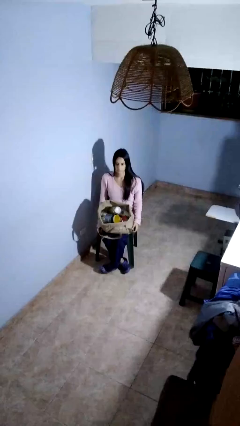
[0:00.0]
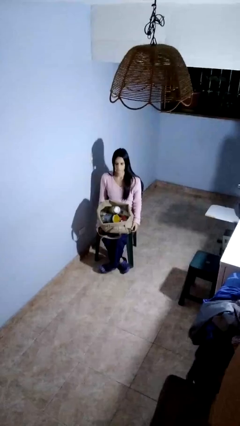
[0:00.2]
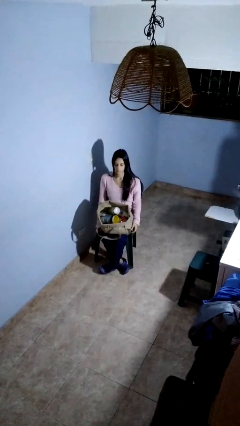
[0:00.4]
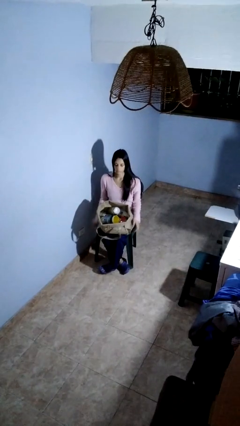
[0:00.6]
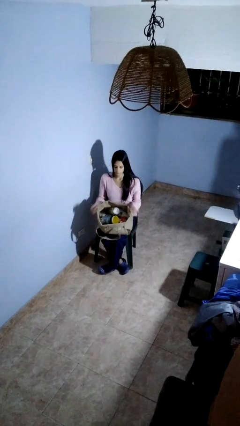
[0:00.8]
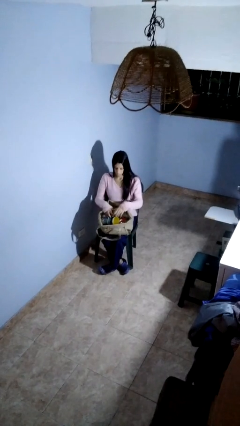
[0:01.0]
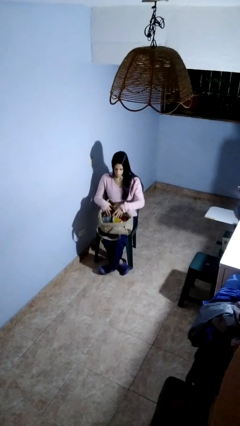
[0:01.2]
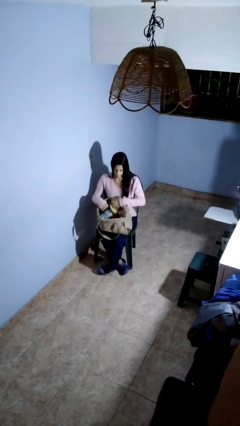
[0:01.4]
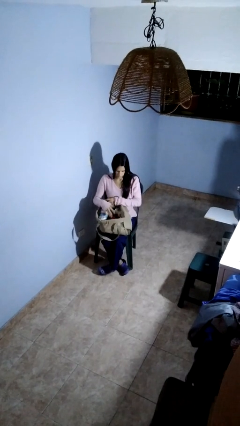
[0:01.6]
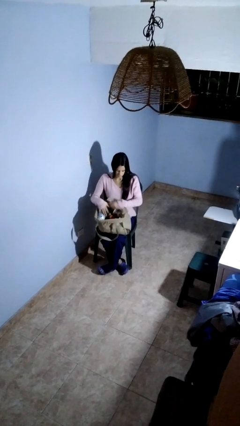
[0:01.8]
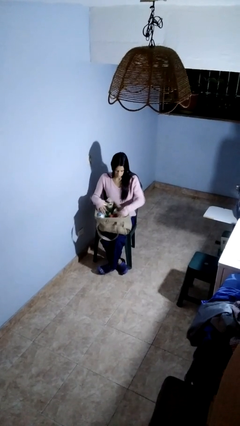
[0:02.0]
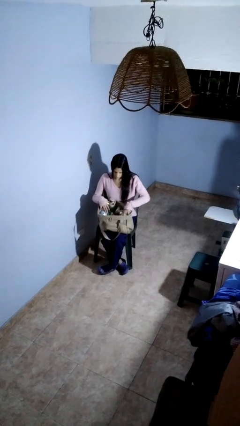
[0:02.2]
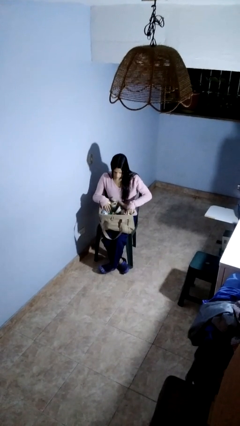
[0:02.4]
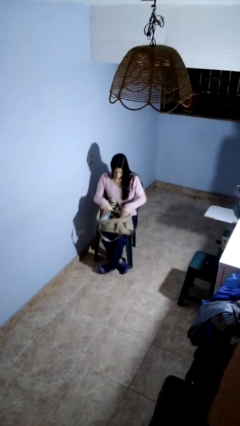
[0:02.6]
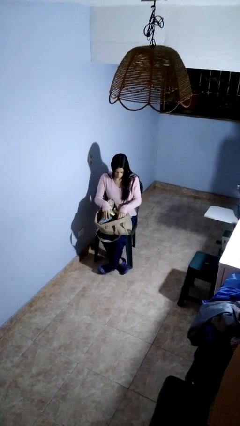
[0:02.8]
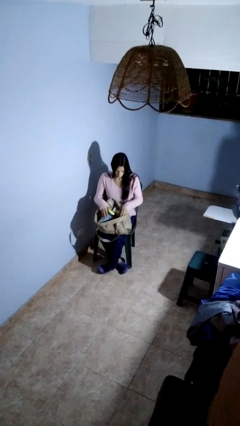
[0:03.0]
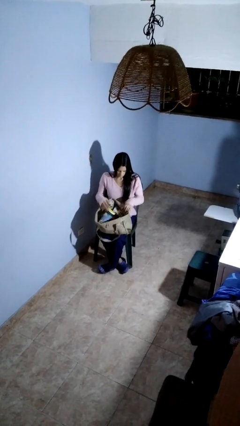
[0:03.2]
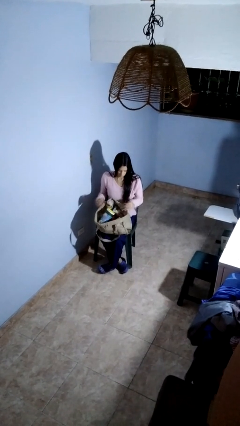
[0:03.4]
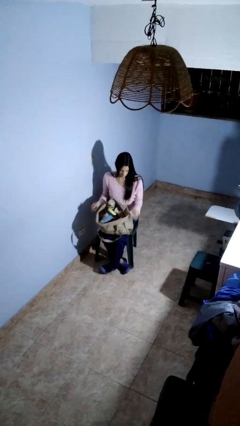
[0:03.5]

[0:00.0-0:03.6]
person searches in bag

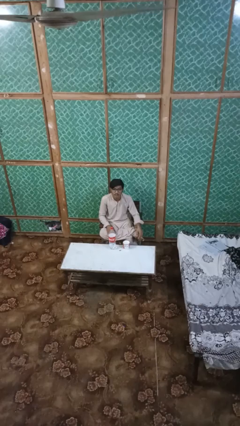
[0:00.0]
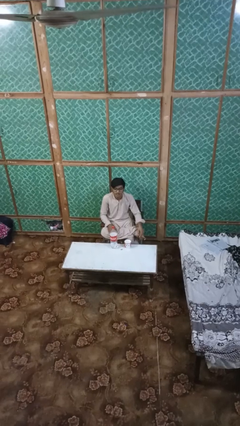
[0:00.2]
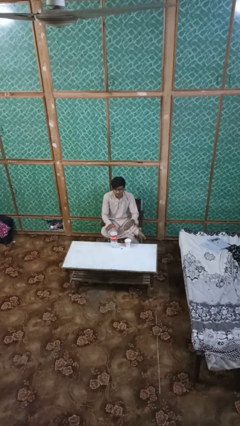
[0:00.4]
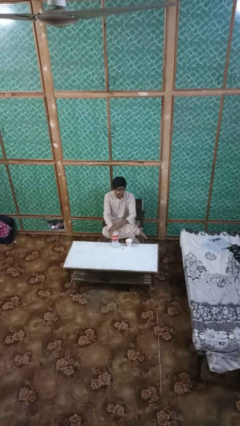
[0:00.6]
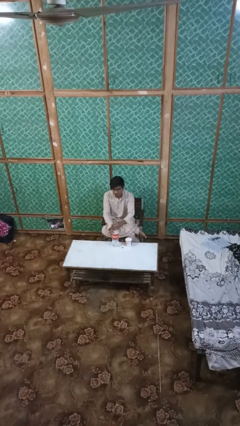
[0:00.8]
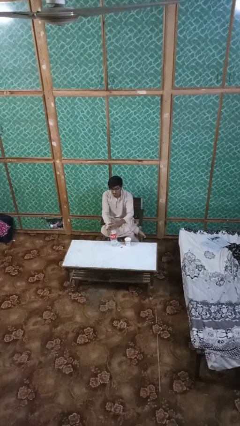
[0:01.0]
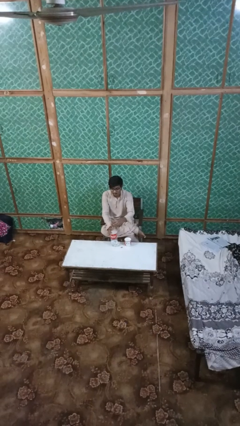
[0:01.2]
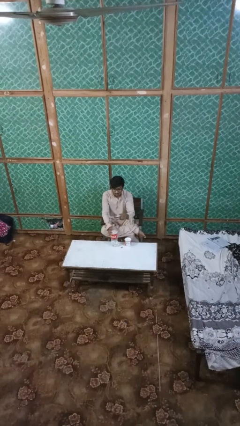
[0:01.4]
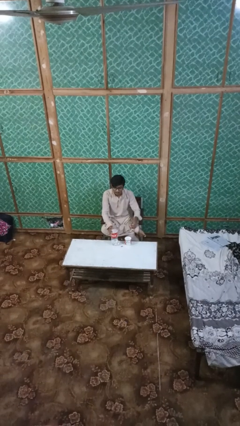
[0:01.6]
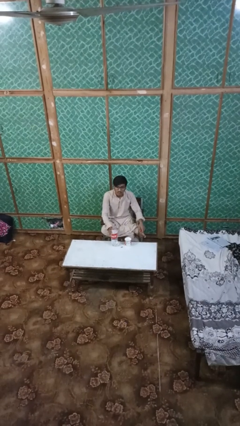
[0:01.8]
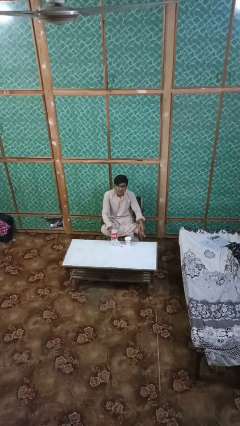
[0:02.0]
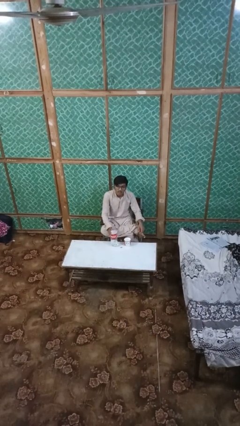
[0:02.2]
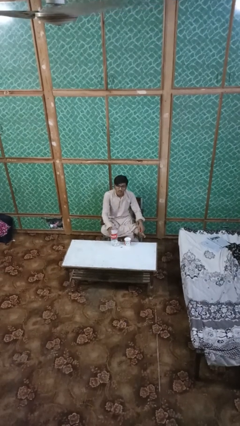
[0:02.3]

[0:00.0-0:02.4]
person unscrews lid from bottle

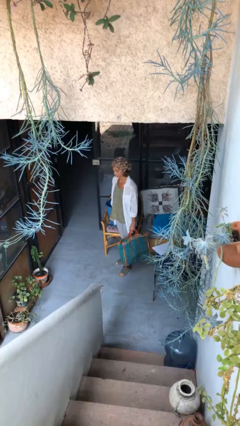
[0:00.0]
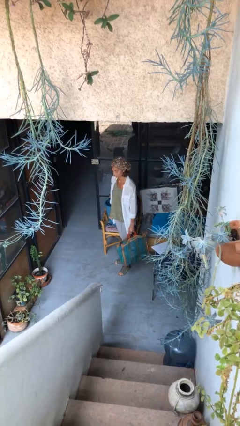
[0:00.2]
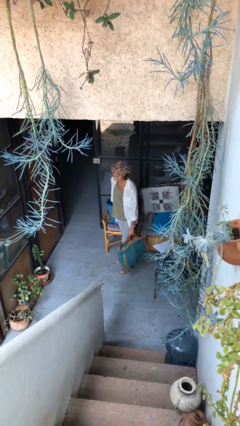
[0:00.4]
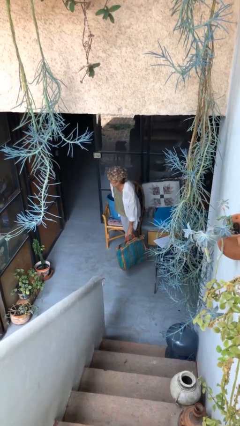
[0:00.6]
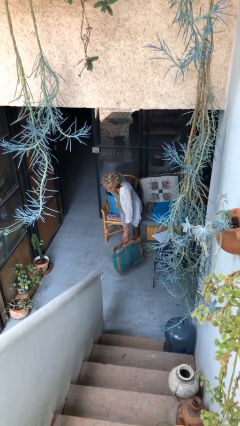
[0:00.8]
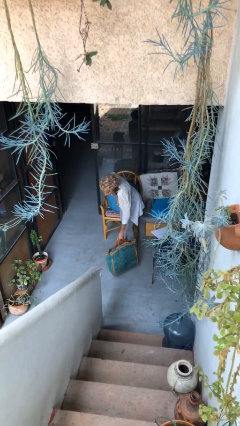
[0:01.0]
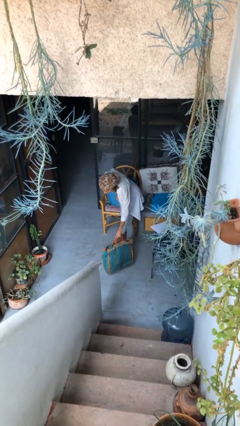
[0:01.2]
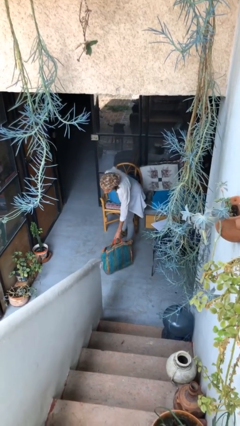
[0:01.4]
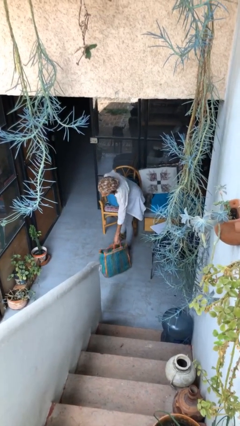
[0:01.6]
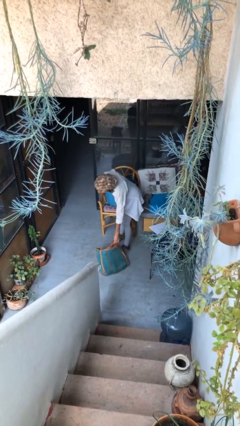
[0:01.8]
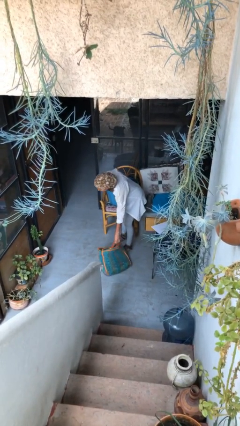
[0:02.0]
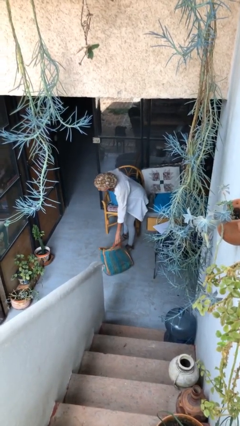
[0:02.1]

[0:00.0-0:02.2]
person puts down object on floor

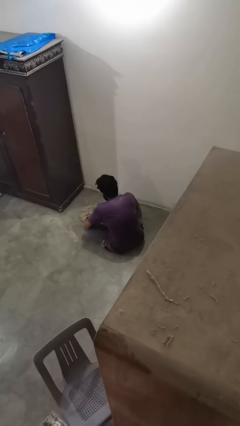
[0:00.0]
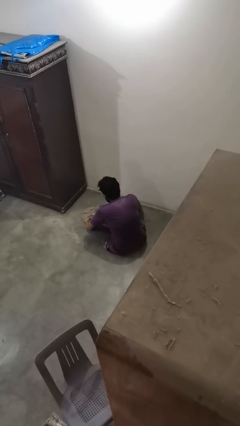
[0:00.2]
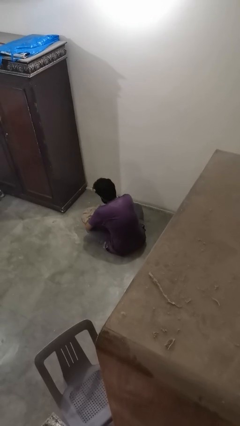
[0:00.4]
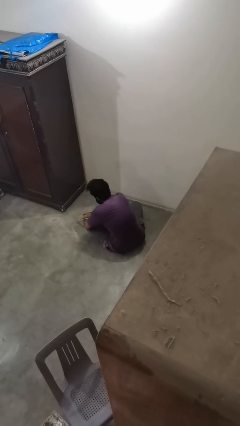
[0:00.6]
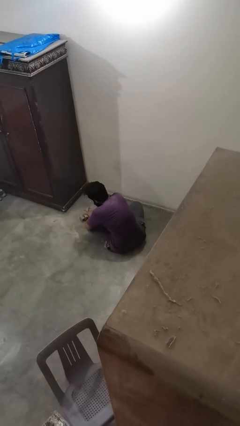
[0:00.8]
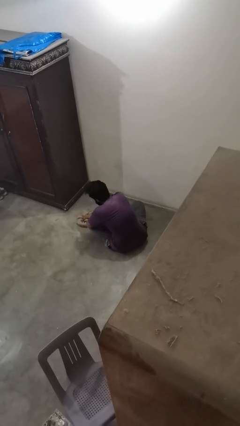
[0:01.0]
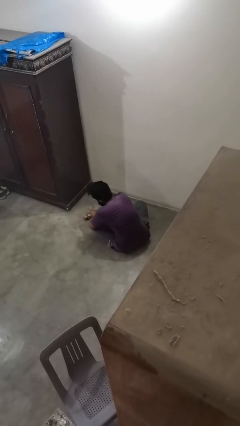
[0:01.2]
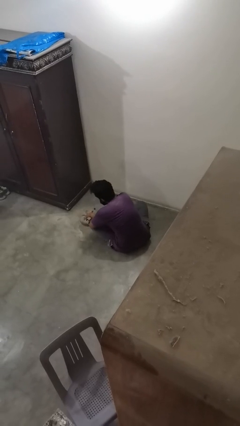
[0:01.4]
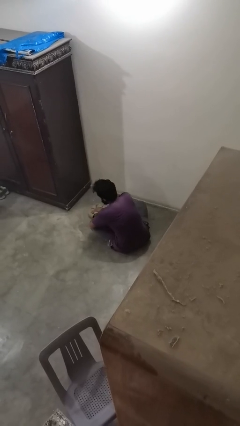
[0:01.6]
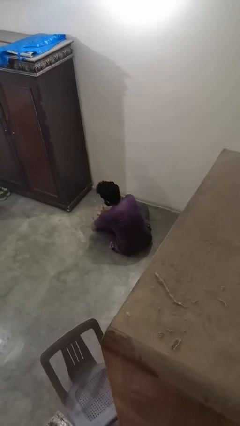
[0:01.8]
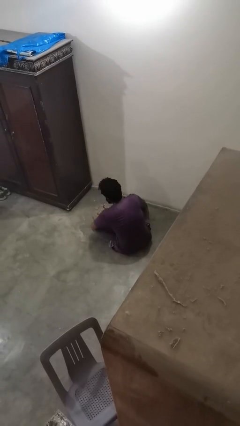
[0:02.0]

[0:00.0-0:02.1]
person mops

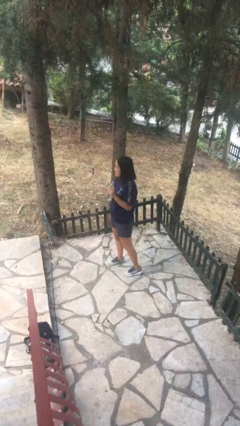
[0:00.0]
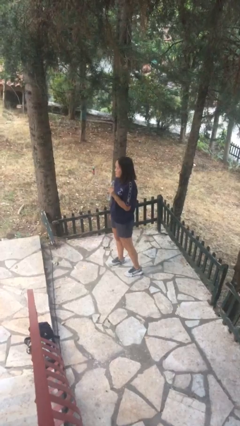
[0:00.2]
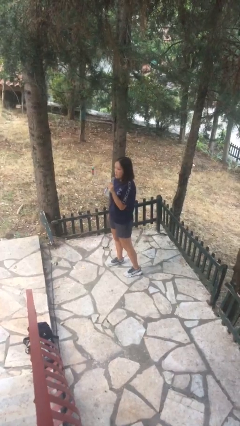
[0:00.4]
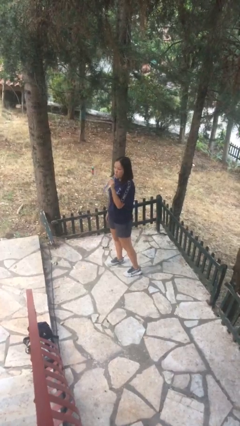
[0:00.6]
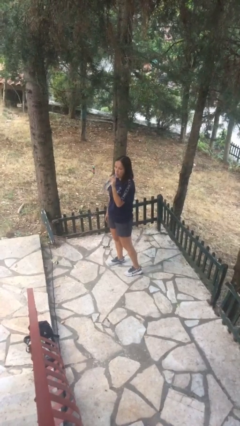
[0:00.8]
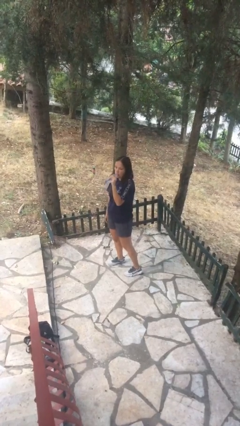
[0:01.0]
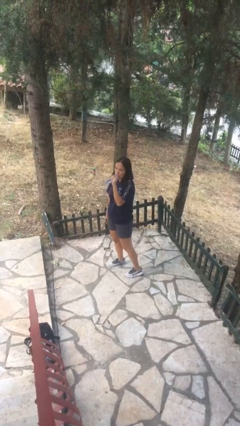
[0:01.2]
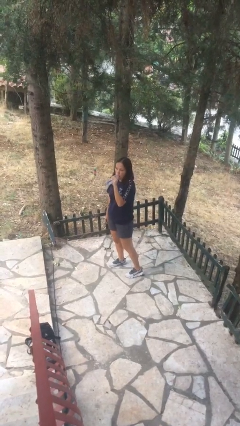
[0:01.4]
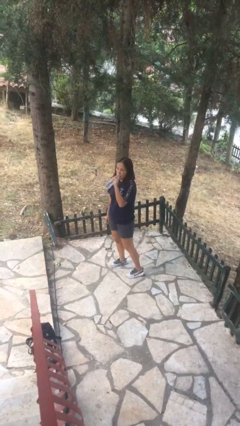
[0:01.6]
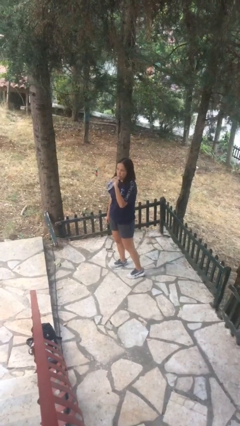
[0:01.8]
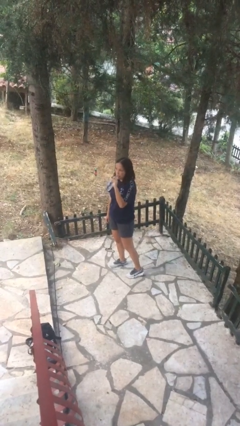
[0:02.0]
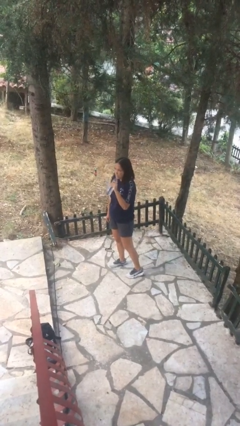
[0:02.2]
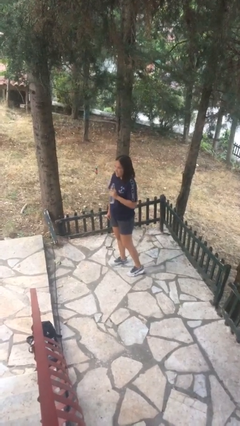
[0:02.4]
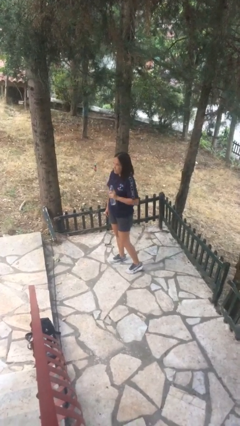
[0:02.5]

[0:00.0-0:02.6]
person drinks from bottle

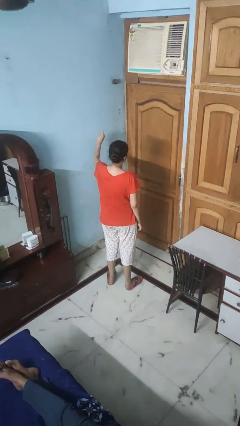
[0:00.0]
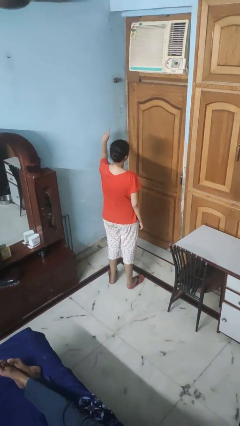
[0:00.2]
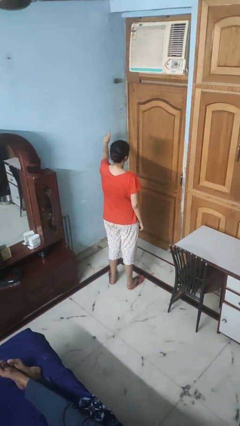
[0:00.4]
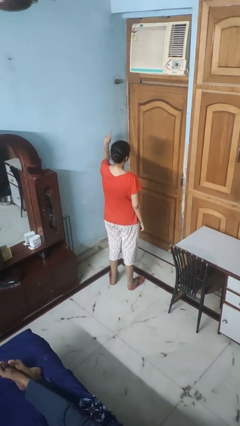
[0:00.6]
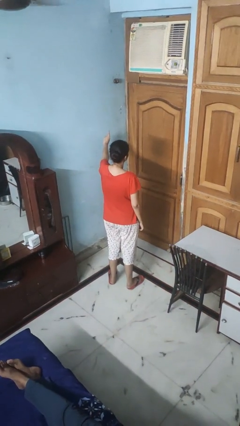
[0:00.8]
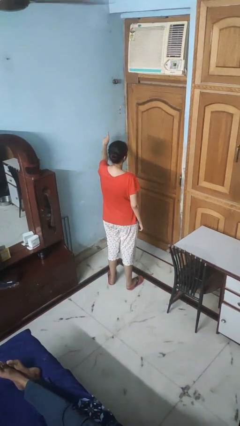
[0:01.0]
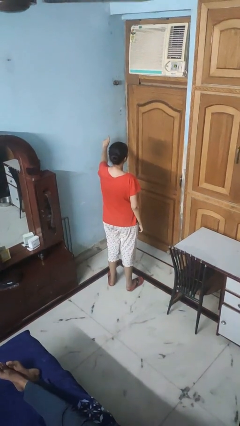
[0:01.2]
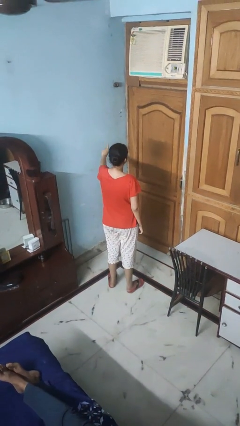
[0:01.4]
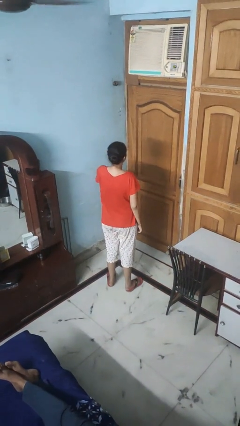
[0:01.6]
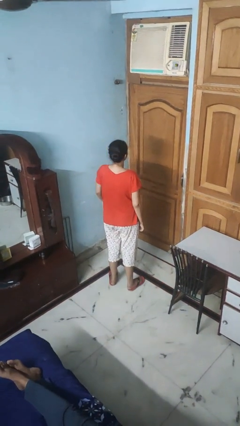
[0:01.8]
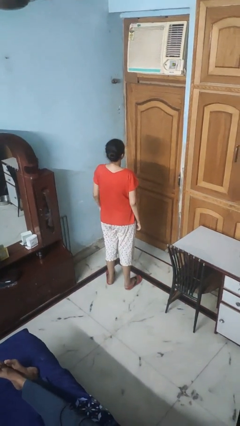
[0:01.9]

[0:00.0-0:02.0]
person gestures number one

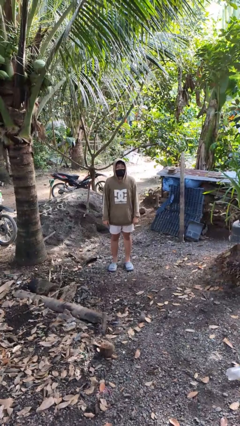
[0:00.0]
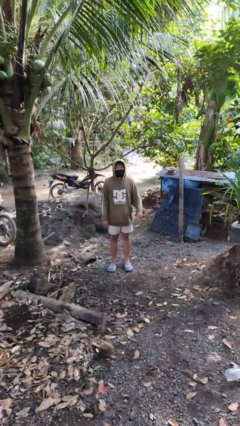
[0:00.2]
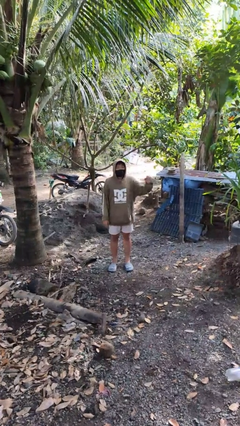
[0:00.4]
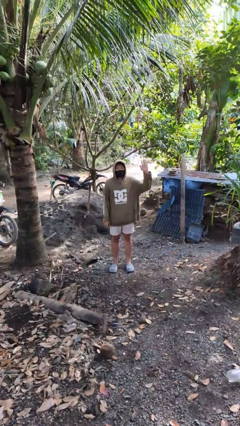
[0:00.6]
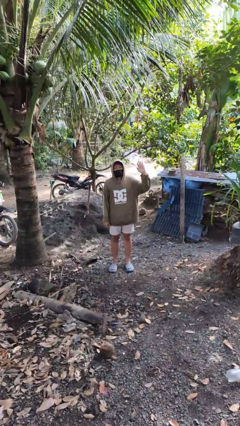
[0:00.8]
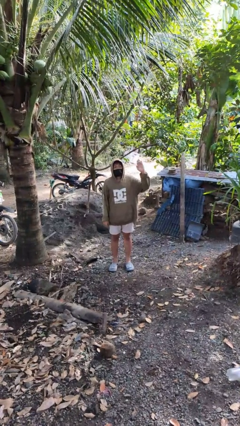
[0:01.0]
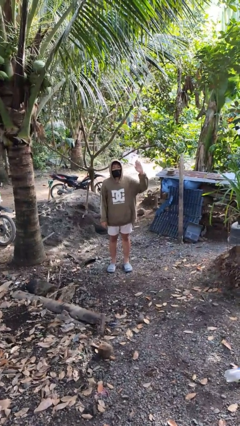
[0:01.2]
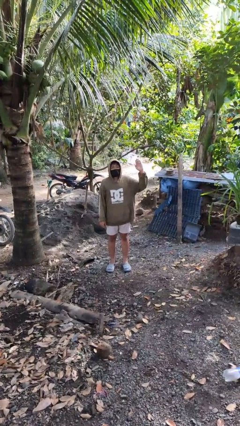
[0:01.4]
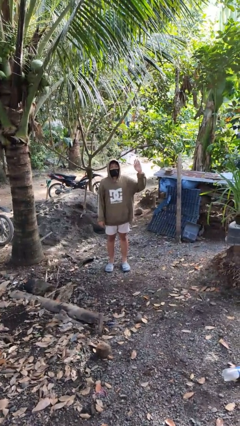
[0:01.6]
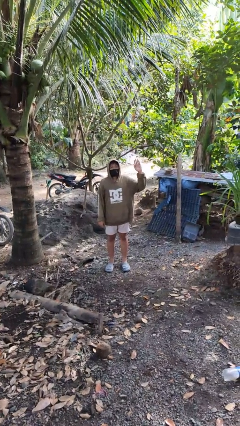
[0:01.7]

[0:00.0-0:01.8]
person gestures number five

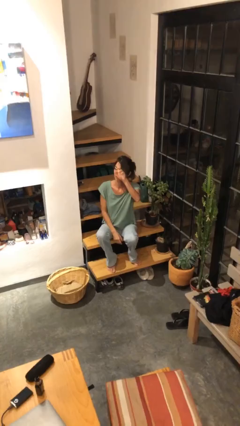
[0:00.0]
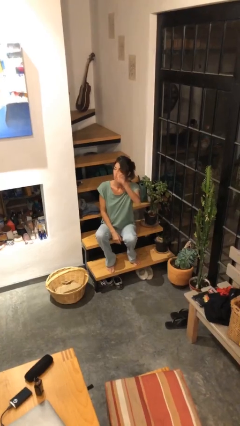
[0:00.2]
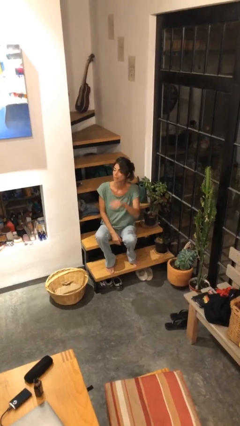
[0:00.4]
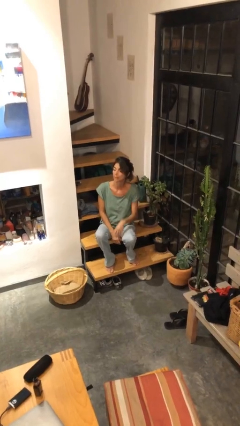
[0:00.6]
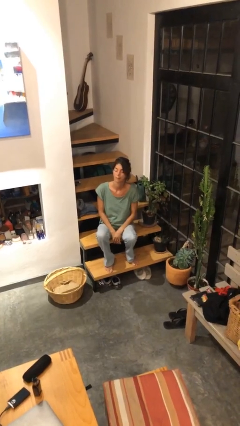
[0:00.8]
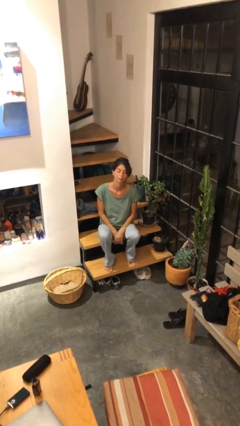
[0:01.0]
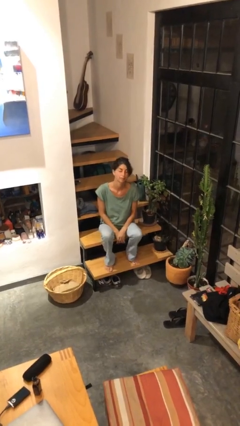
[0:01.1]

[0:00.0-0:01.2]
person gestures lower hand
